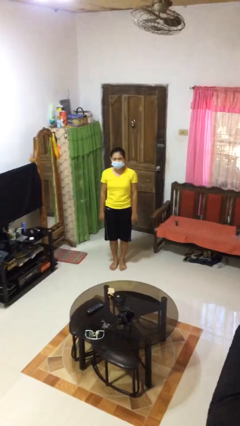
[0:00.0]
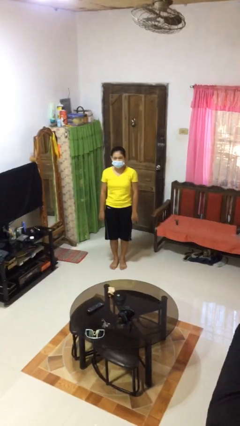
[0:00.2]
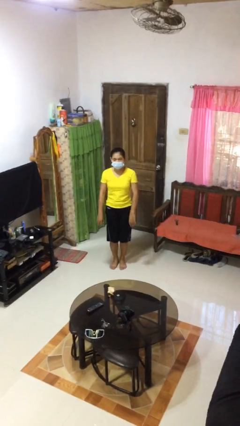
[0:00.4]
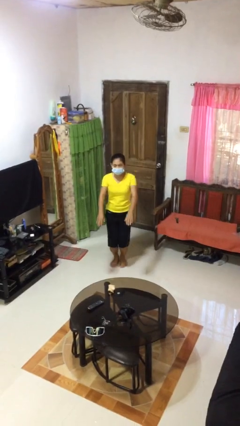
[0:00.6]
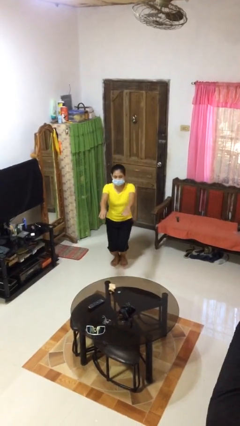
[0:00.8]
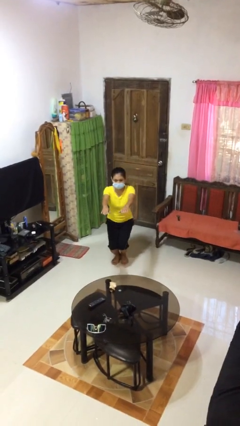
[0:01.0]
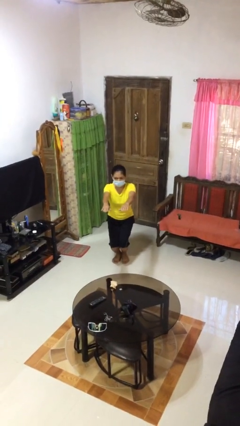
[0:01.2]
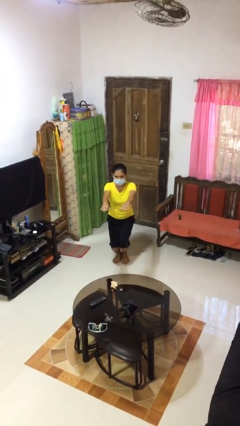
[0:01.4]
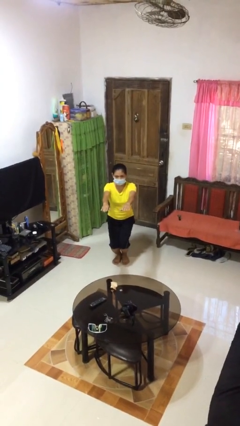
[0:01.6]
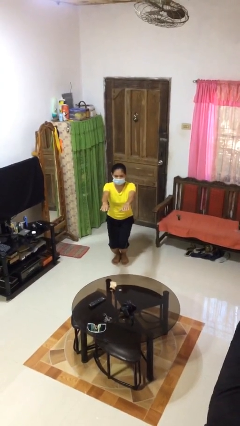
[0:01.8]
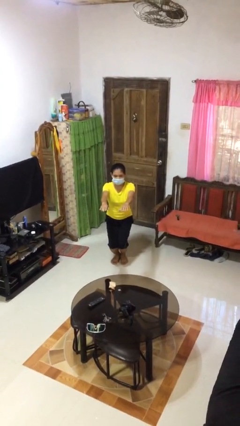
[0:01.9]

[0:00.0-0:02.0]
person squats

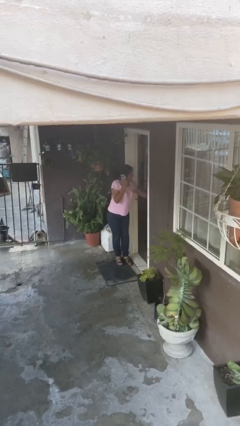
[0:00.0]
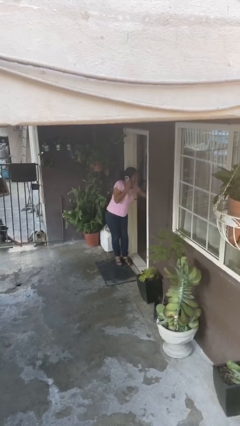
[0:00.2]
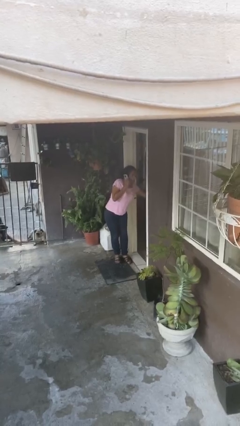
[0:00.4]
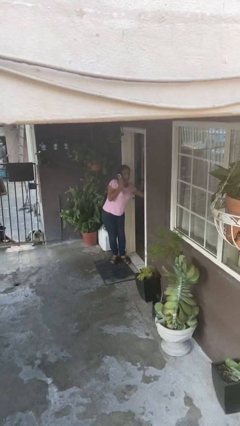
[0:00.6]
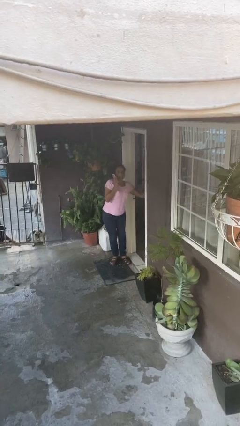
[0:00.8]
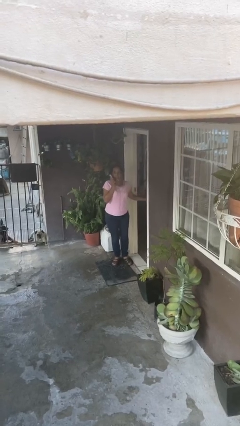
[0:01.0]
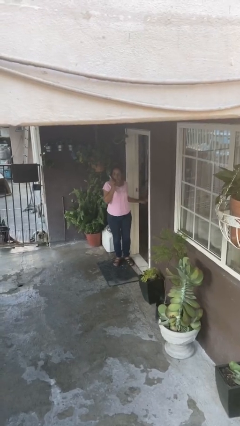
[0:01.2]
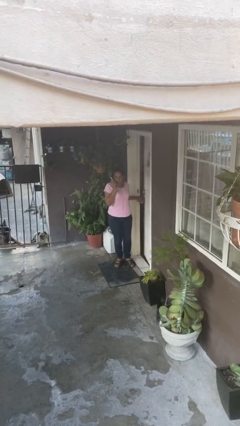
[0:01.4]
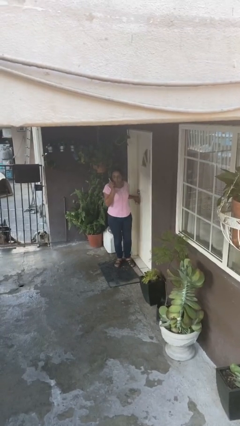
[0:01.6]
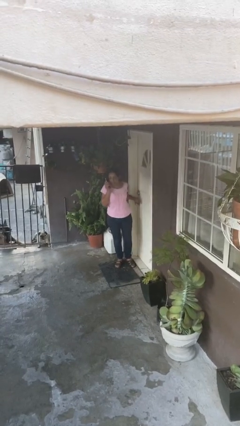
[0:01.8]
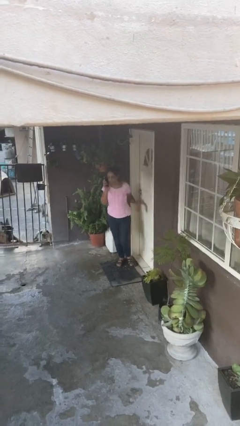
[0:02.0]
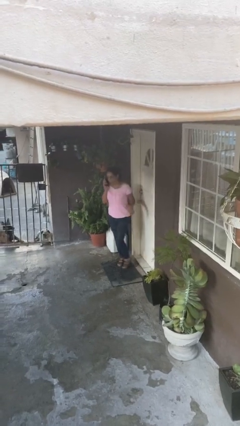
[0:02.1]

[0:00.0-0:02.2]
person closes facility door

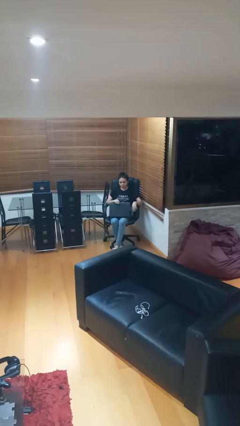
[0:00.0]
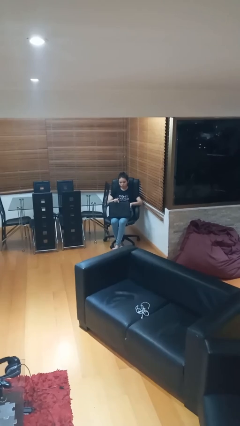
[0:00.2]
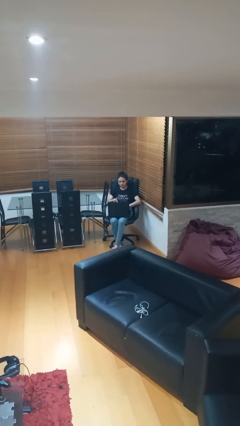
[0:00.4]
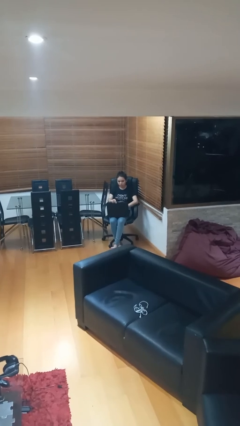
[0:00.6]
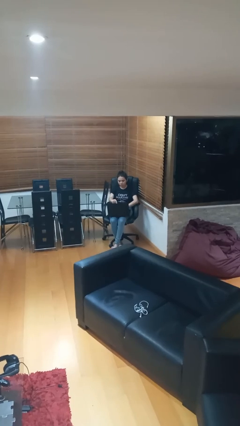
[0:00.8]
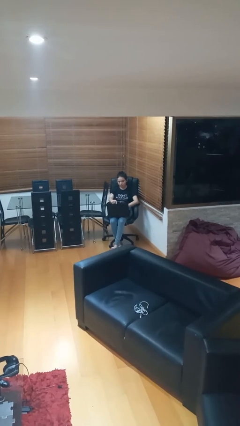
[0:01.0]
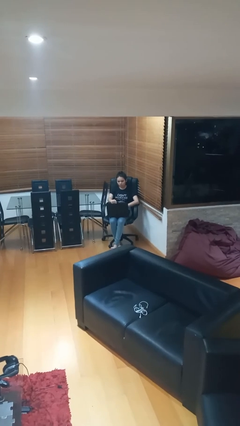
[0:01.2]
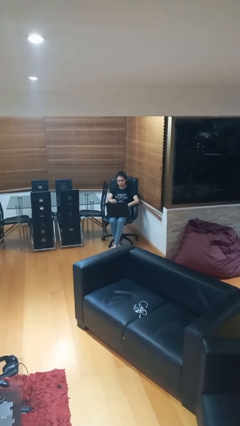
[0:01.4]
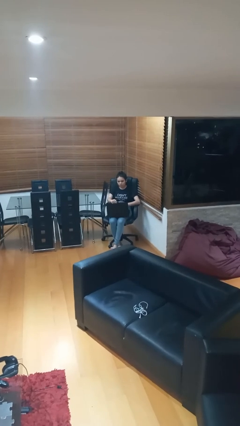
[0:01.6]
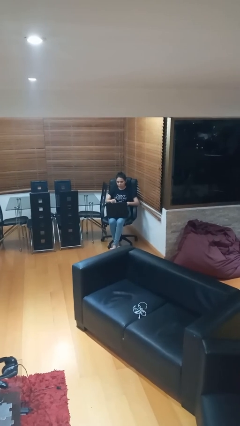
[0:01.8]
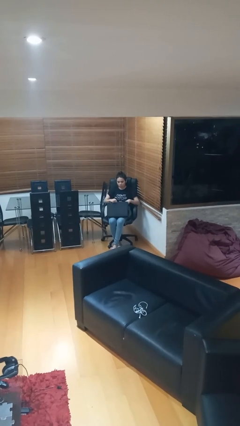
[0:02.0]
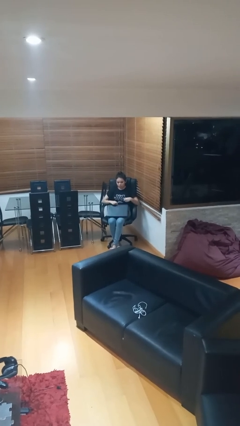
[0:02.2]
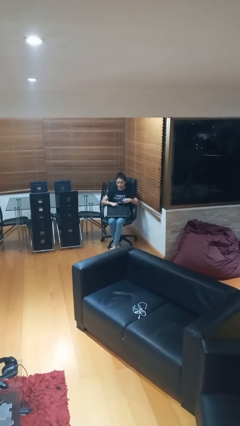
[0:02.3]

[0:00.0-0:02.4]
person interacts with laptop

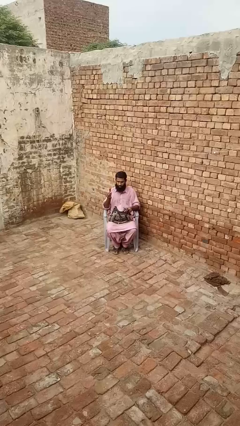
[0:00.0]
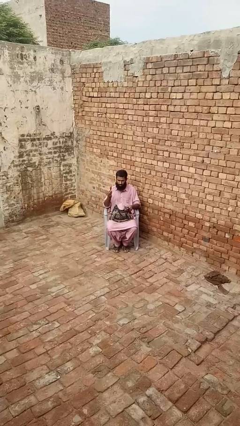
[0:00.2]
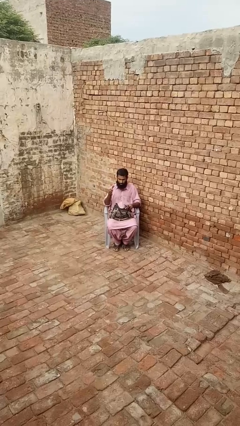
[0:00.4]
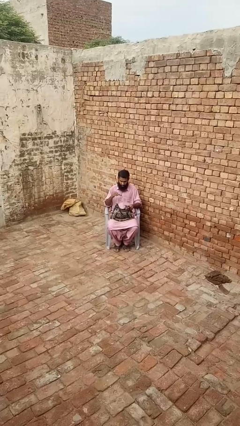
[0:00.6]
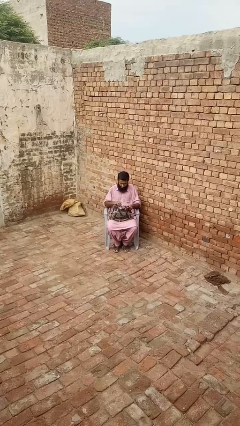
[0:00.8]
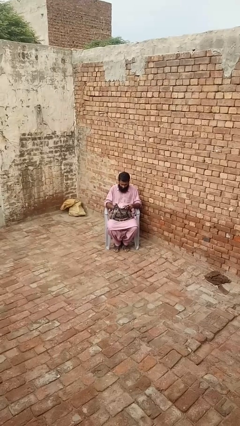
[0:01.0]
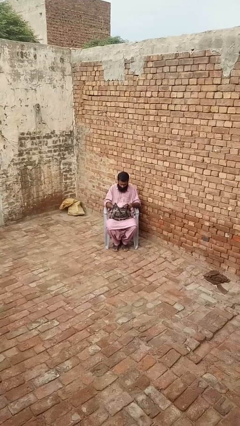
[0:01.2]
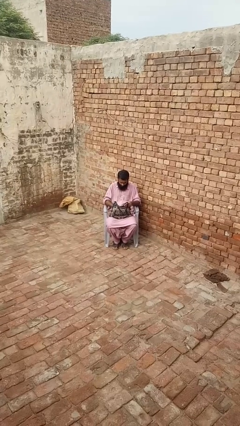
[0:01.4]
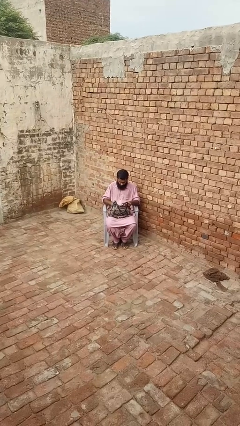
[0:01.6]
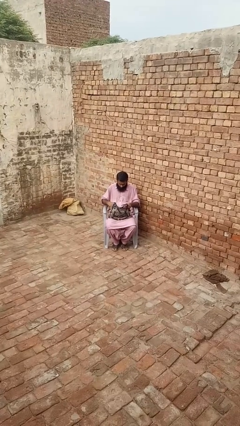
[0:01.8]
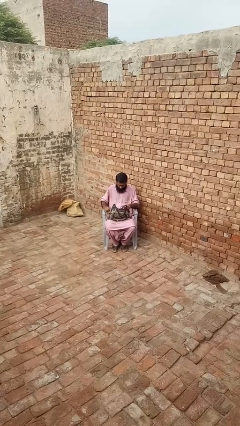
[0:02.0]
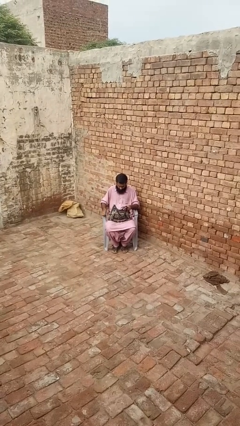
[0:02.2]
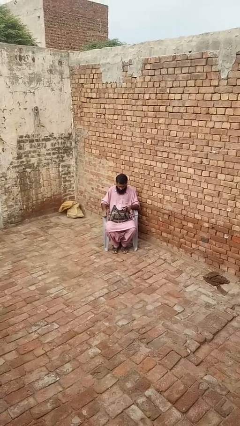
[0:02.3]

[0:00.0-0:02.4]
person puts object into purse

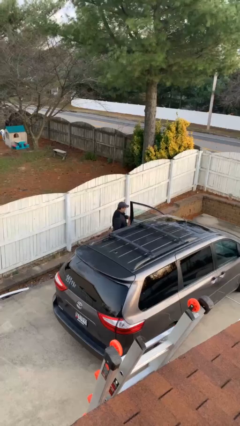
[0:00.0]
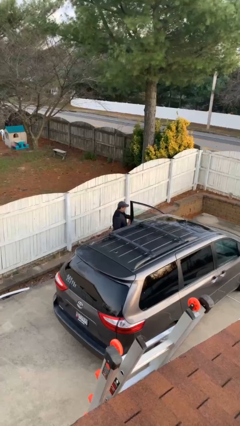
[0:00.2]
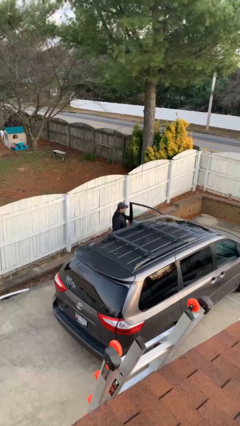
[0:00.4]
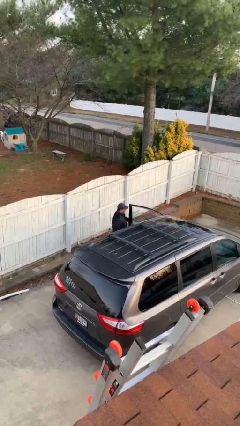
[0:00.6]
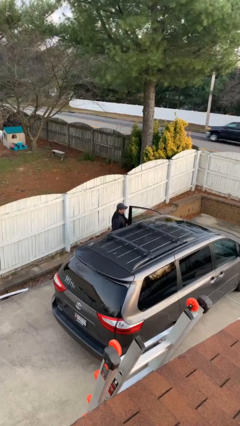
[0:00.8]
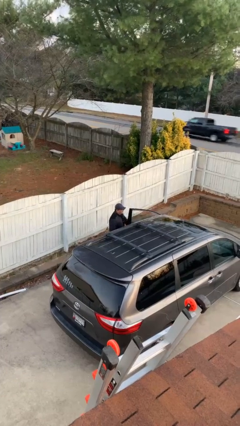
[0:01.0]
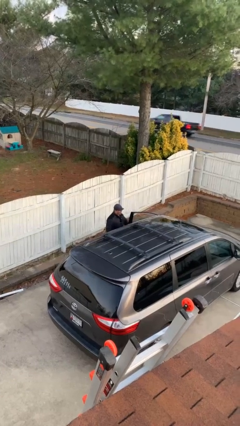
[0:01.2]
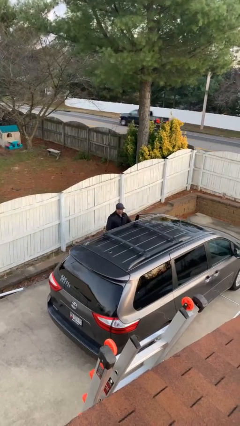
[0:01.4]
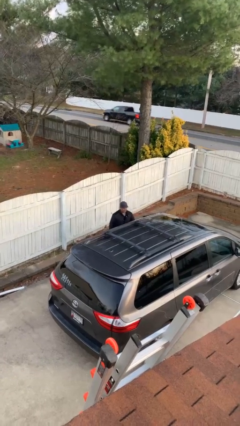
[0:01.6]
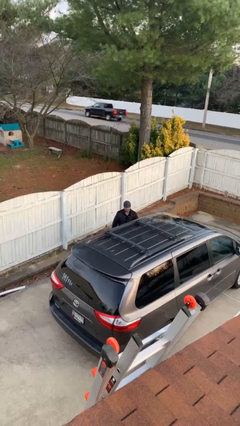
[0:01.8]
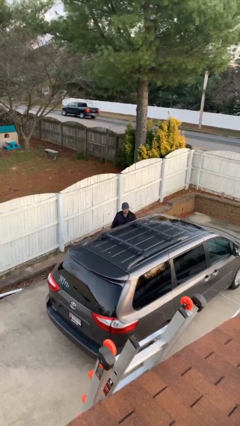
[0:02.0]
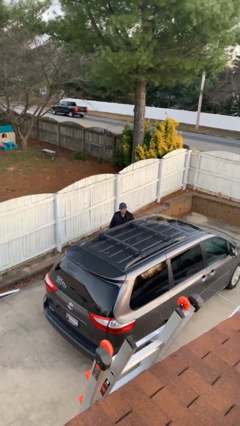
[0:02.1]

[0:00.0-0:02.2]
person closes car door

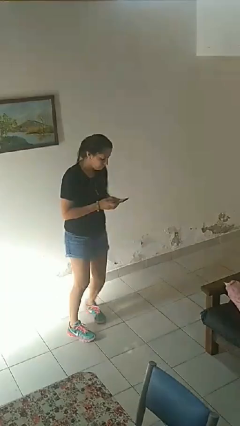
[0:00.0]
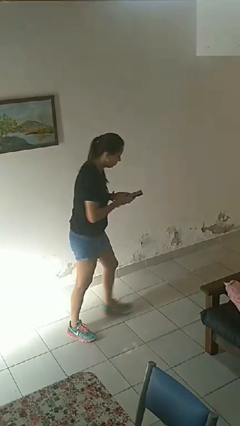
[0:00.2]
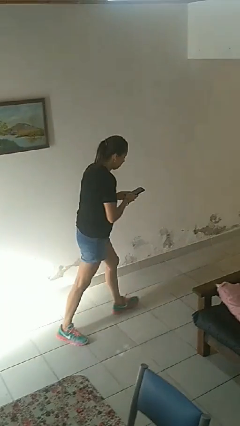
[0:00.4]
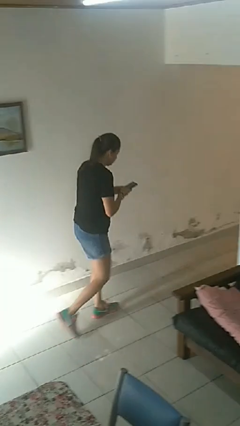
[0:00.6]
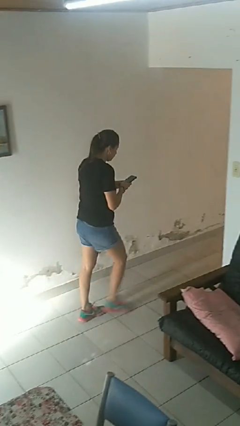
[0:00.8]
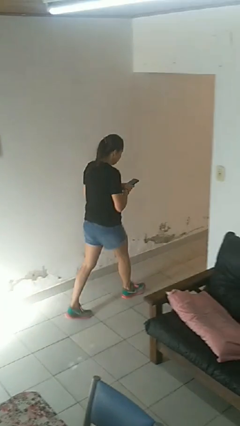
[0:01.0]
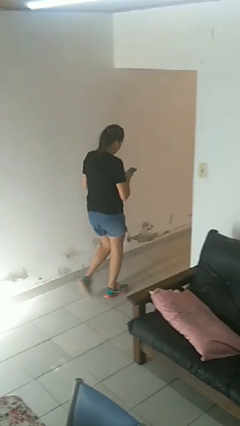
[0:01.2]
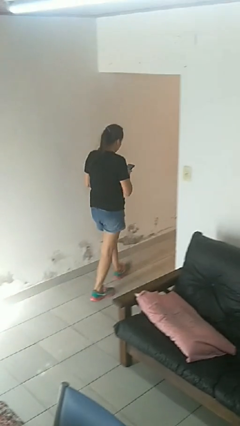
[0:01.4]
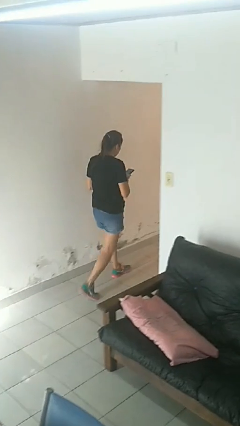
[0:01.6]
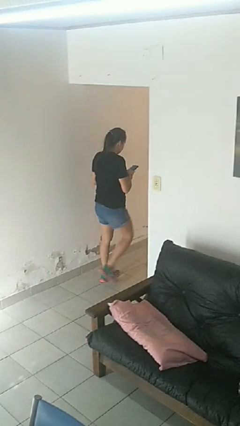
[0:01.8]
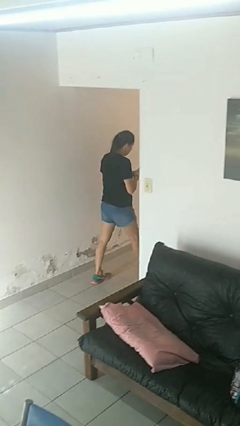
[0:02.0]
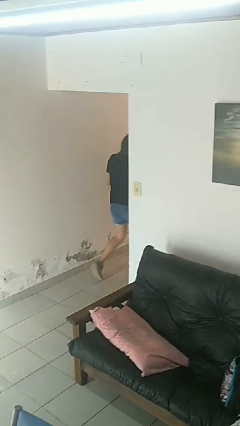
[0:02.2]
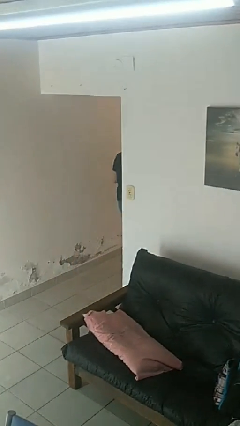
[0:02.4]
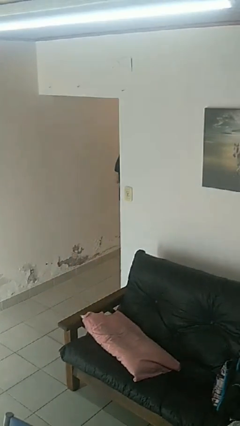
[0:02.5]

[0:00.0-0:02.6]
person exits scene through structure

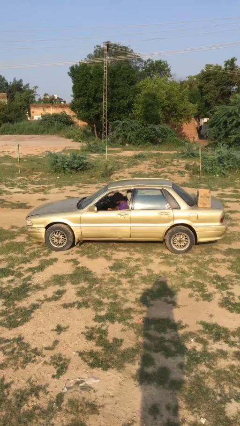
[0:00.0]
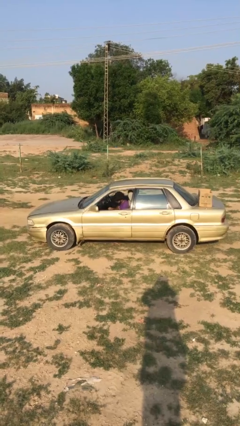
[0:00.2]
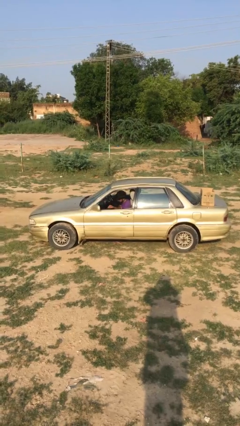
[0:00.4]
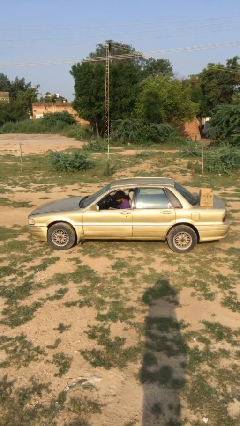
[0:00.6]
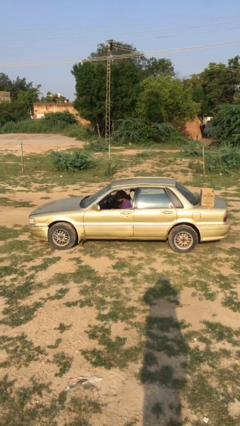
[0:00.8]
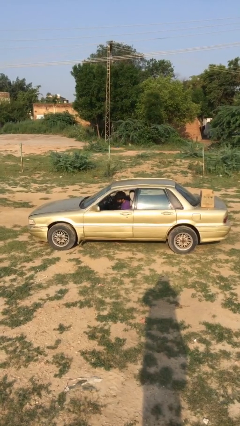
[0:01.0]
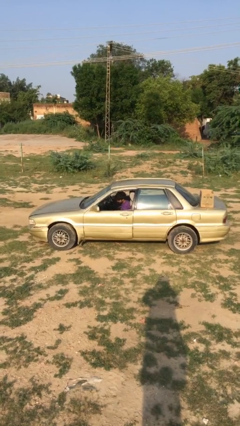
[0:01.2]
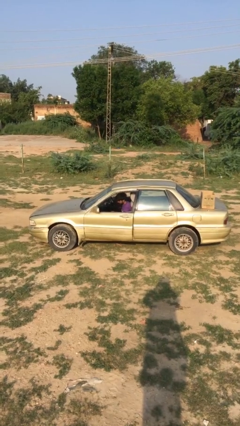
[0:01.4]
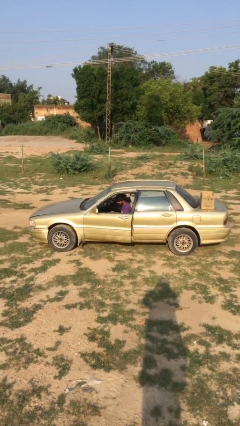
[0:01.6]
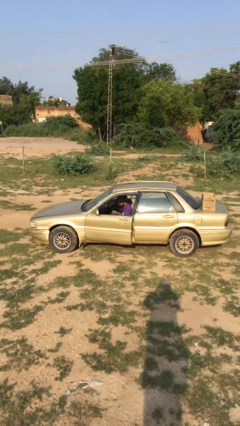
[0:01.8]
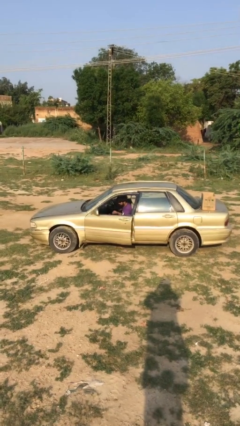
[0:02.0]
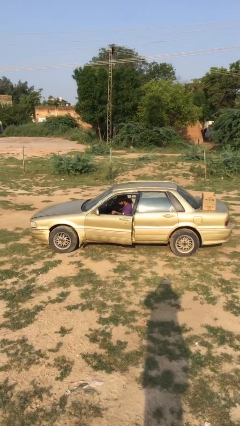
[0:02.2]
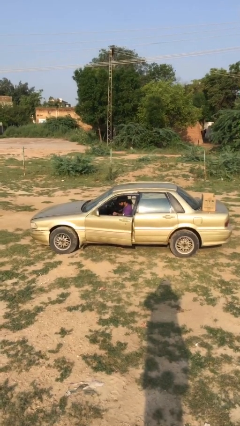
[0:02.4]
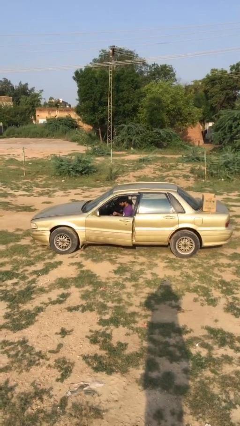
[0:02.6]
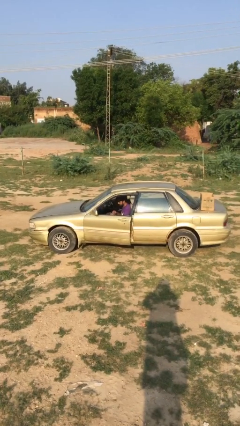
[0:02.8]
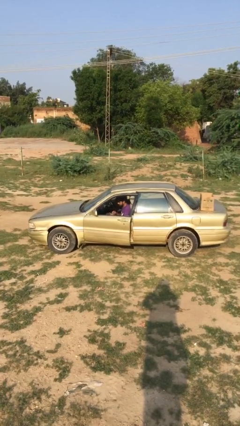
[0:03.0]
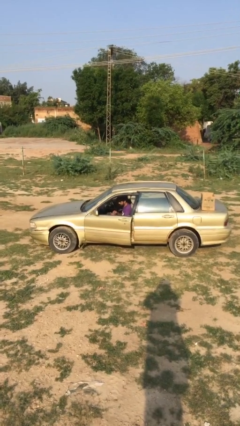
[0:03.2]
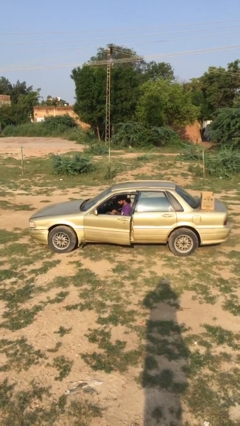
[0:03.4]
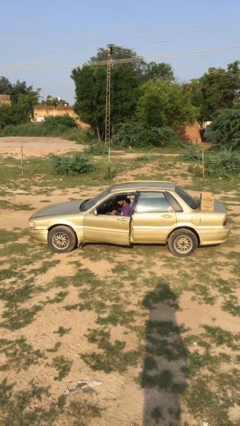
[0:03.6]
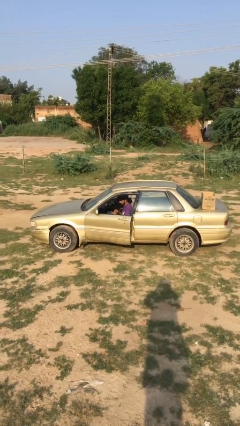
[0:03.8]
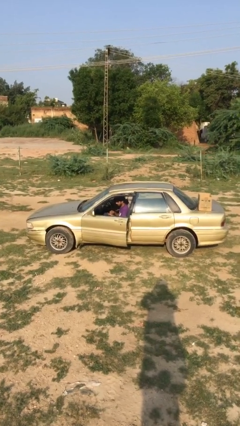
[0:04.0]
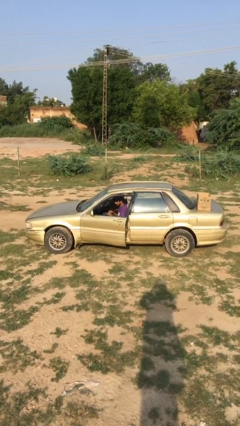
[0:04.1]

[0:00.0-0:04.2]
person opens car door
